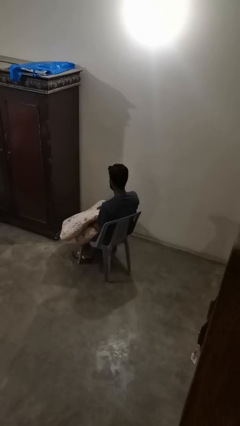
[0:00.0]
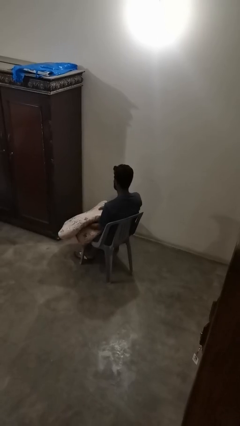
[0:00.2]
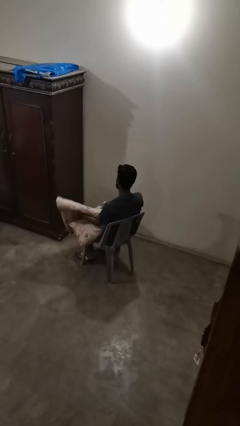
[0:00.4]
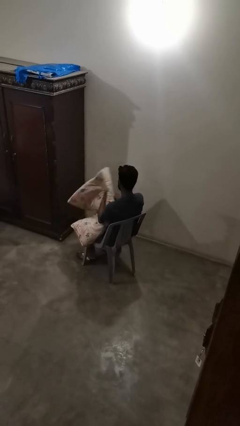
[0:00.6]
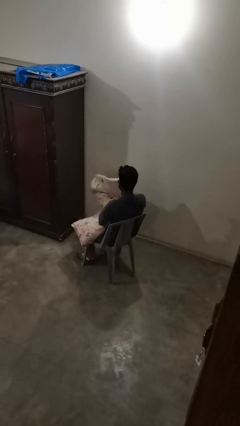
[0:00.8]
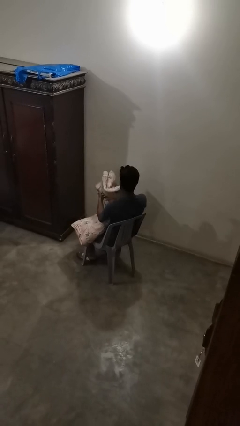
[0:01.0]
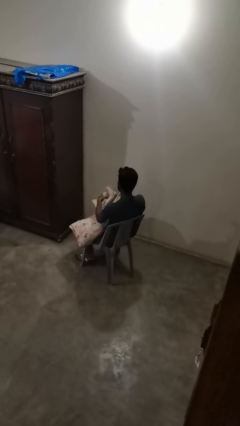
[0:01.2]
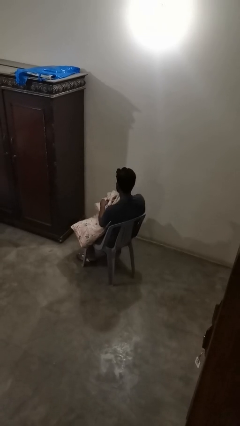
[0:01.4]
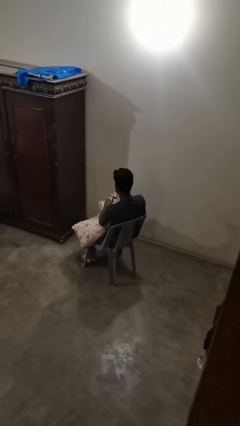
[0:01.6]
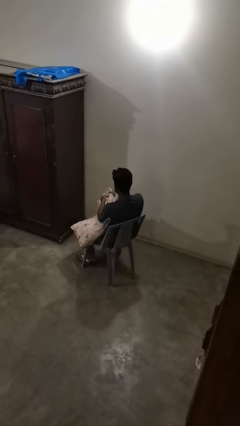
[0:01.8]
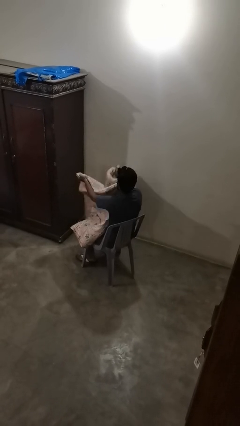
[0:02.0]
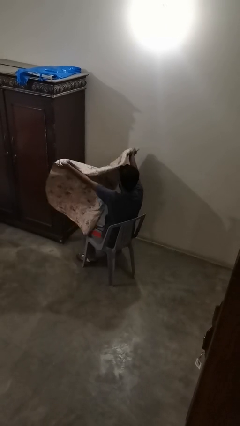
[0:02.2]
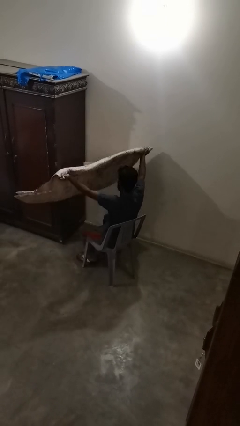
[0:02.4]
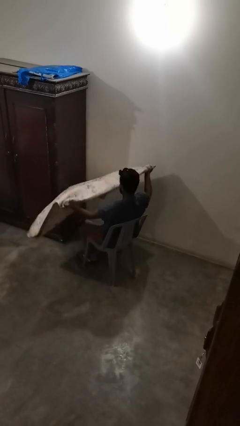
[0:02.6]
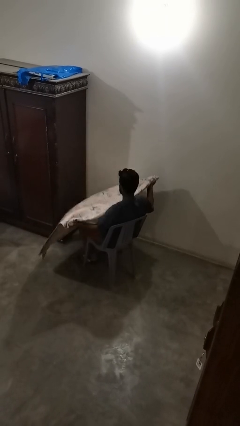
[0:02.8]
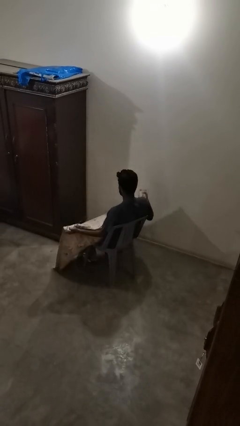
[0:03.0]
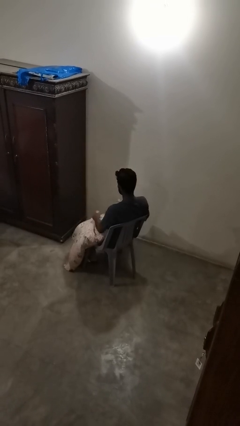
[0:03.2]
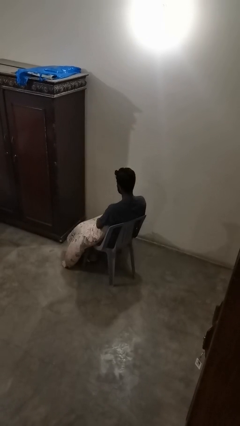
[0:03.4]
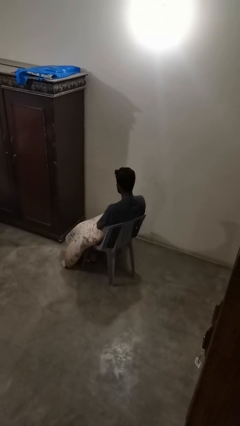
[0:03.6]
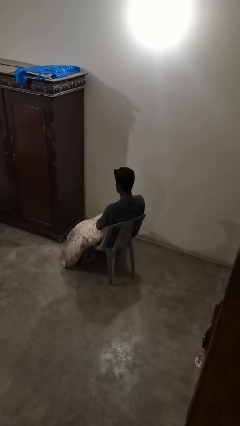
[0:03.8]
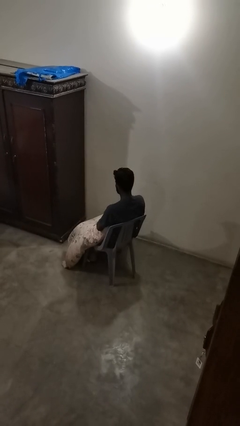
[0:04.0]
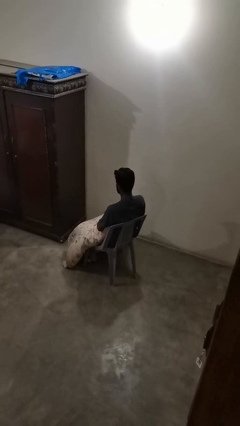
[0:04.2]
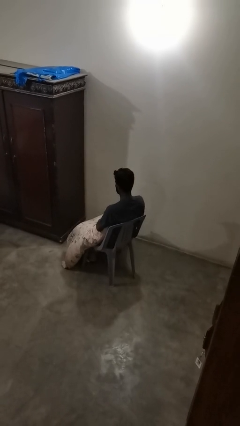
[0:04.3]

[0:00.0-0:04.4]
person unfolds blanket

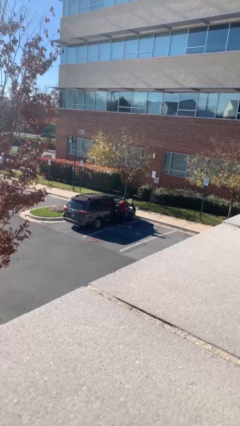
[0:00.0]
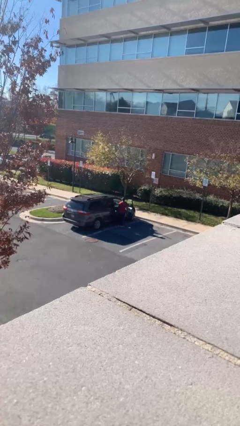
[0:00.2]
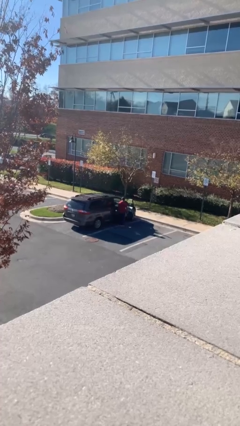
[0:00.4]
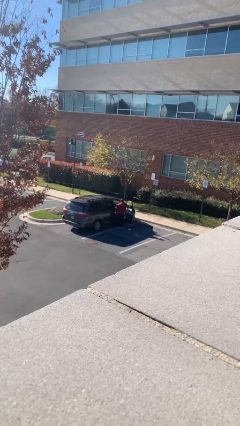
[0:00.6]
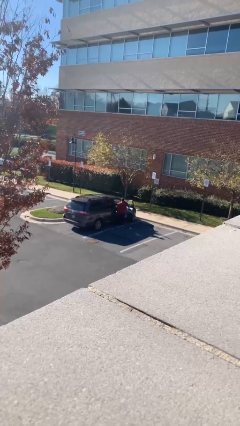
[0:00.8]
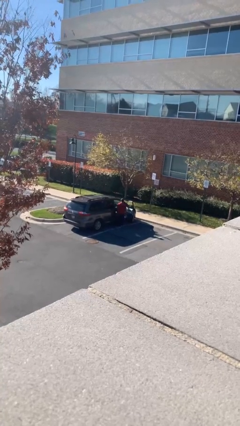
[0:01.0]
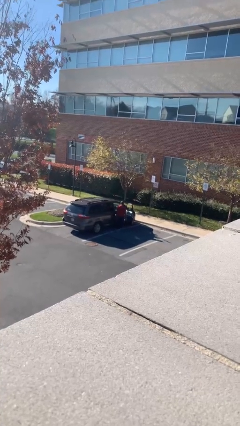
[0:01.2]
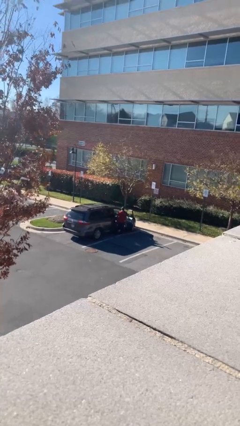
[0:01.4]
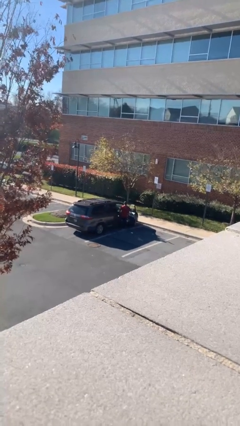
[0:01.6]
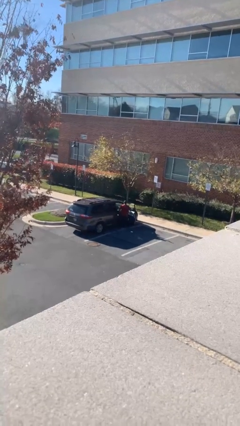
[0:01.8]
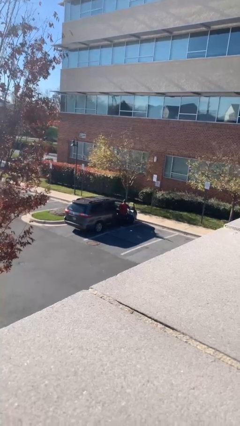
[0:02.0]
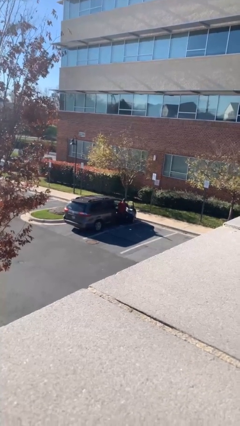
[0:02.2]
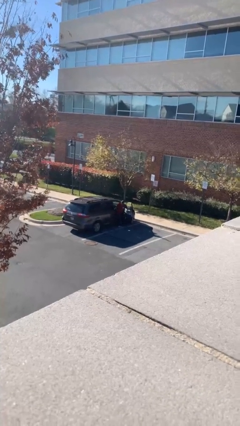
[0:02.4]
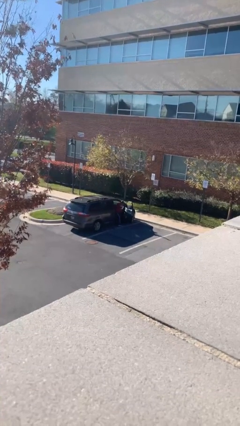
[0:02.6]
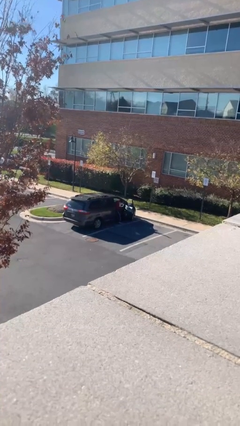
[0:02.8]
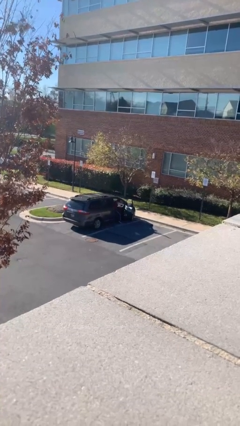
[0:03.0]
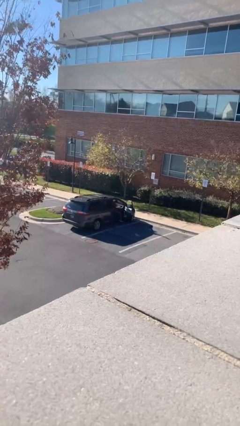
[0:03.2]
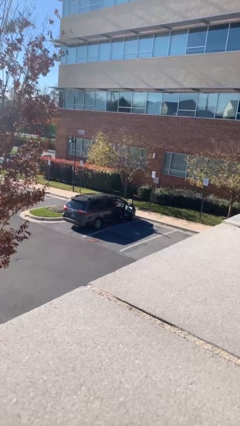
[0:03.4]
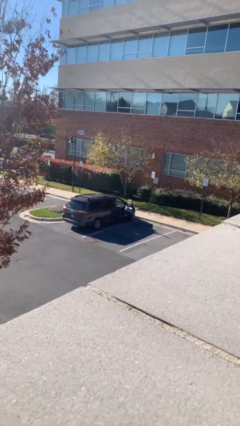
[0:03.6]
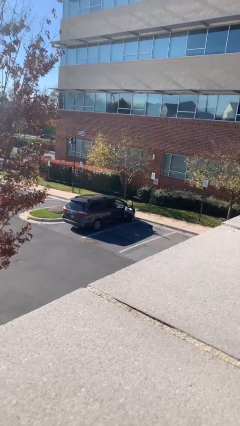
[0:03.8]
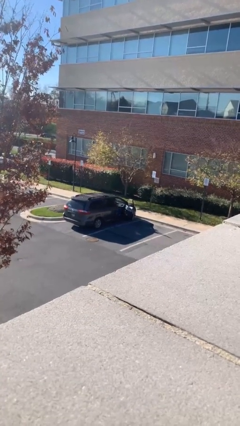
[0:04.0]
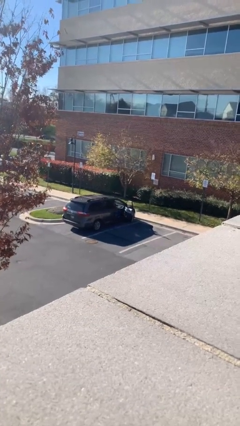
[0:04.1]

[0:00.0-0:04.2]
person enters car

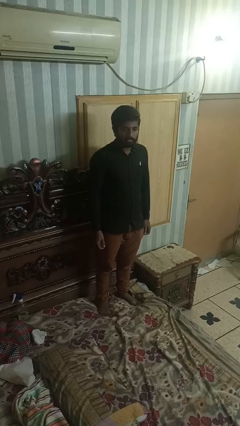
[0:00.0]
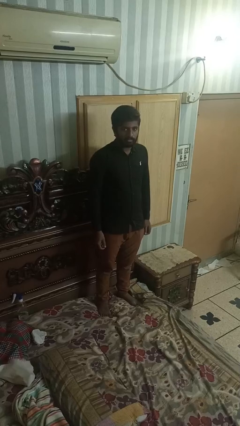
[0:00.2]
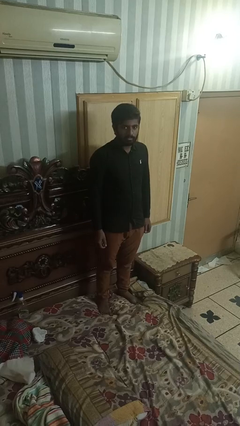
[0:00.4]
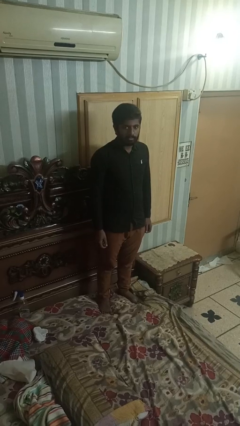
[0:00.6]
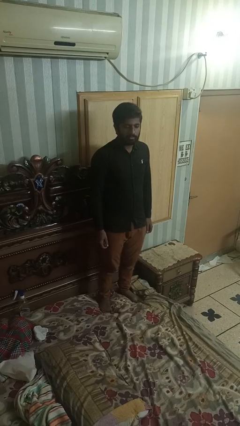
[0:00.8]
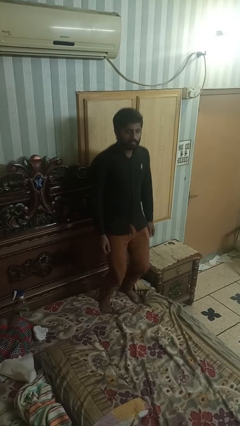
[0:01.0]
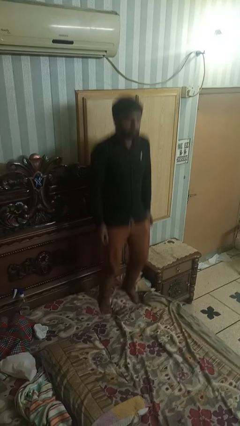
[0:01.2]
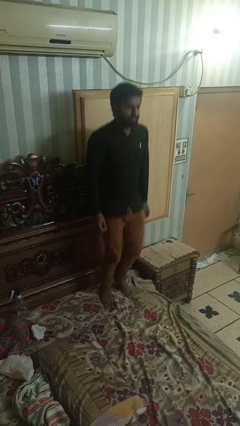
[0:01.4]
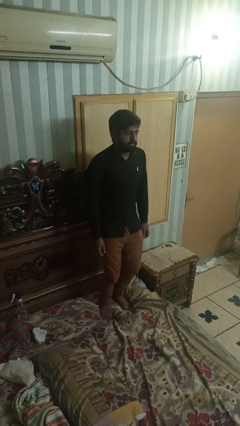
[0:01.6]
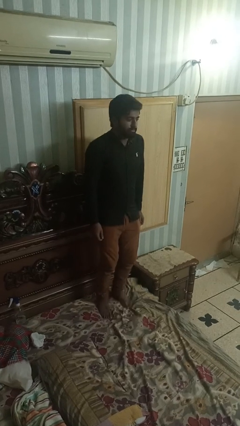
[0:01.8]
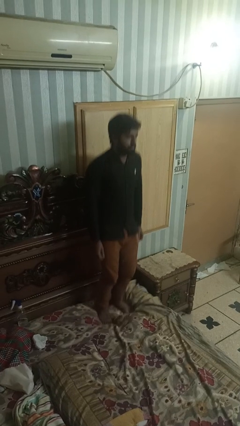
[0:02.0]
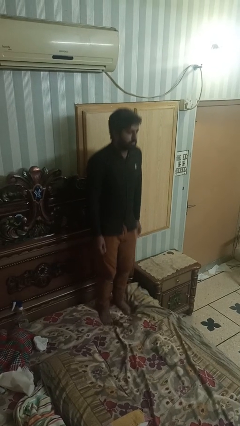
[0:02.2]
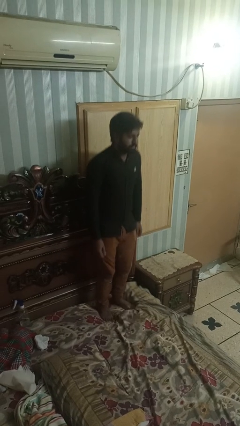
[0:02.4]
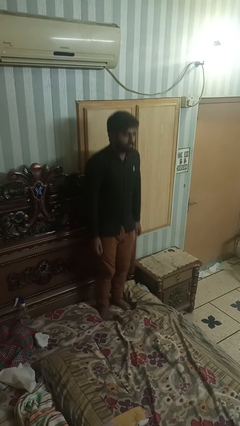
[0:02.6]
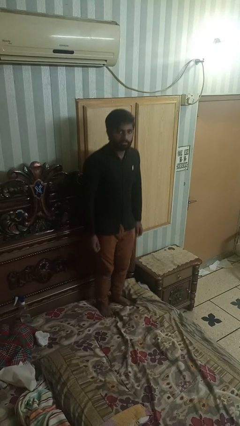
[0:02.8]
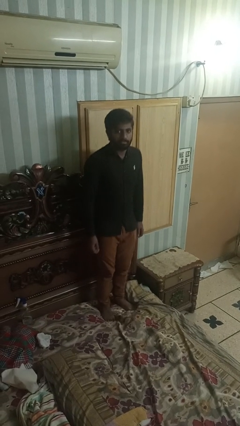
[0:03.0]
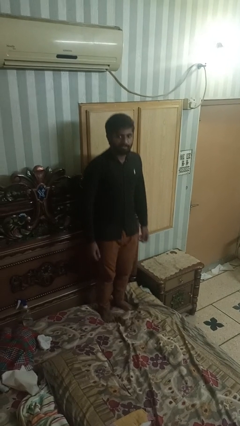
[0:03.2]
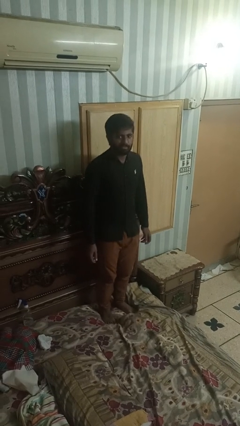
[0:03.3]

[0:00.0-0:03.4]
person jumps on bed

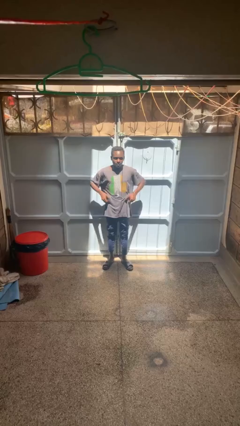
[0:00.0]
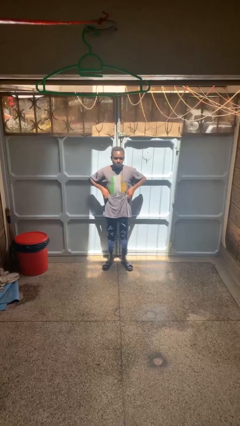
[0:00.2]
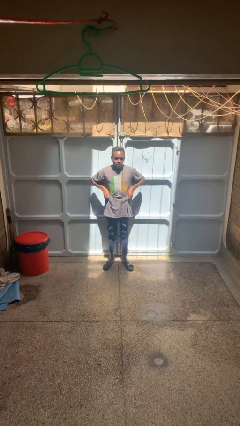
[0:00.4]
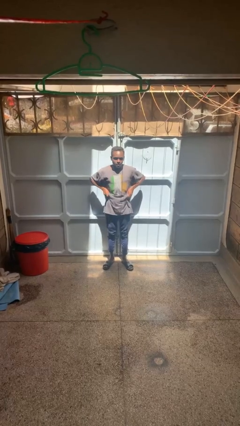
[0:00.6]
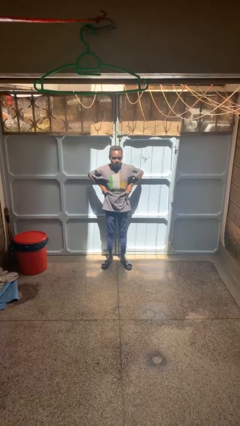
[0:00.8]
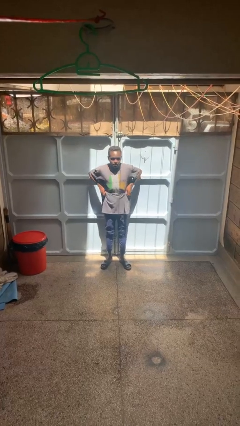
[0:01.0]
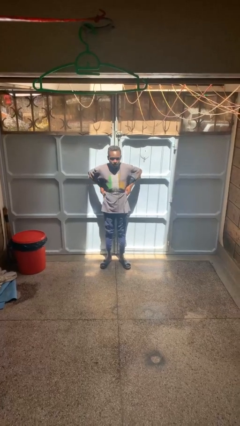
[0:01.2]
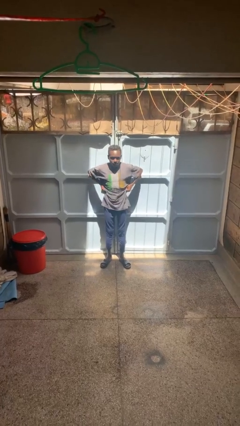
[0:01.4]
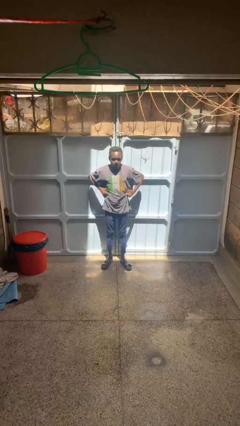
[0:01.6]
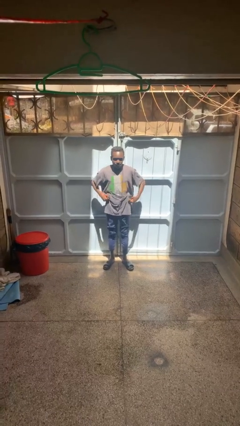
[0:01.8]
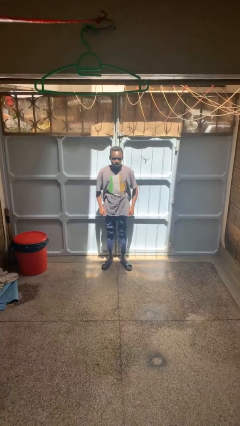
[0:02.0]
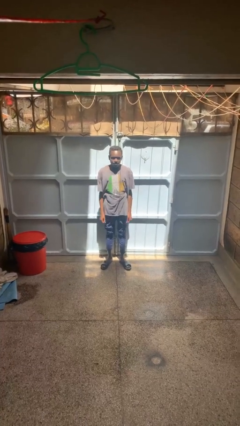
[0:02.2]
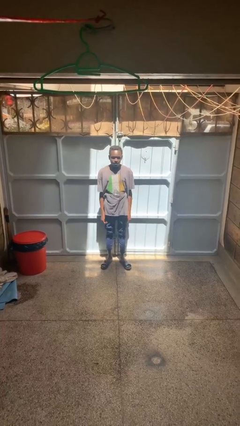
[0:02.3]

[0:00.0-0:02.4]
person hikes up pants

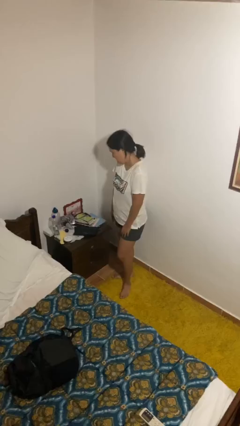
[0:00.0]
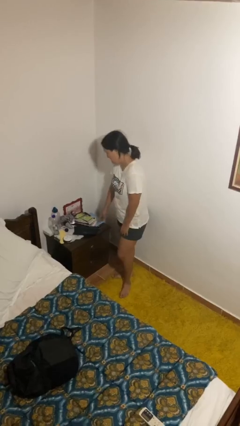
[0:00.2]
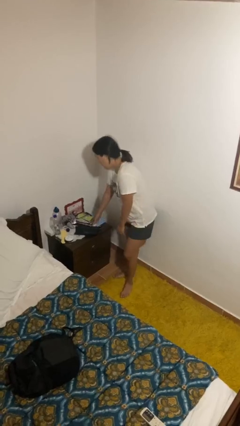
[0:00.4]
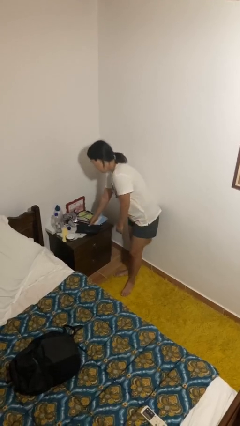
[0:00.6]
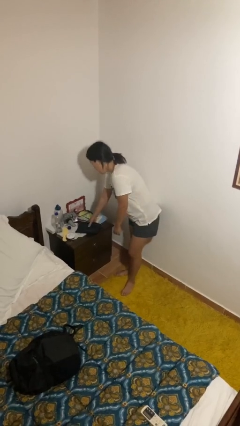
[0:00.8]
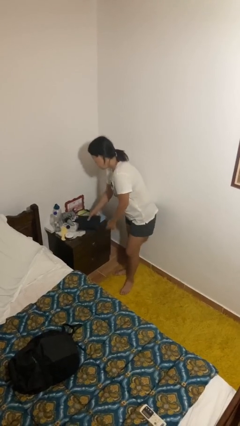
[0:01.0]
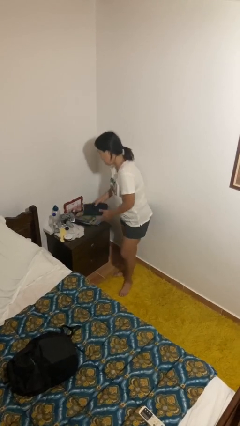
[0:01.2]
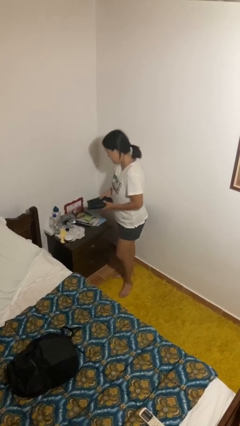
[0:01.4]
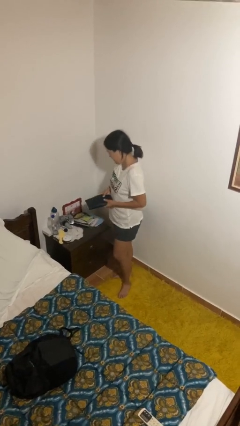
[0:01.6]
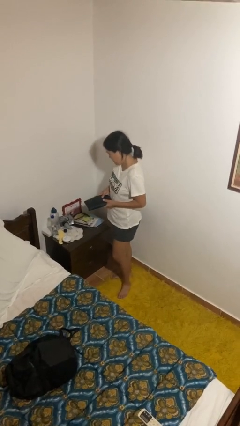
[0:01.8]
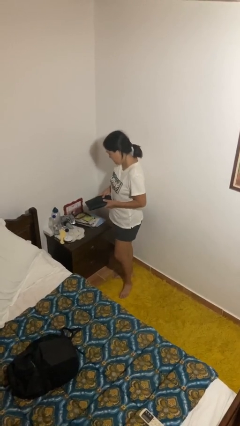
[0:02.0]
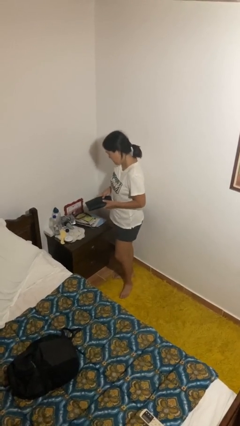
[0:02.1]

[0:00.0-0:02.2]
person picks up object from countertop

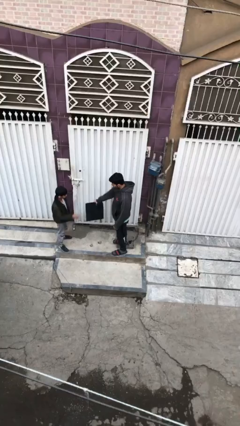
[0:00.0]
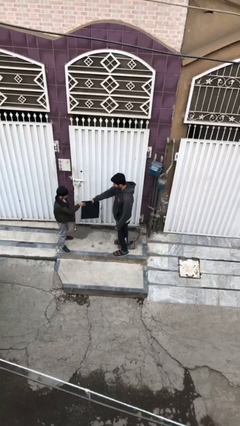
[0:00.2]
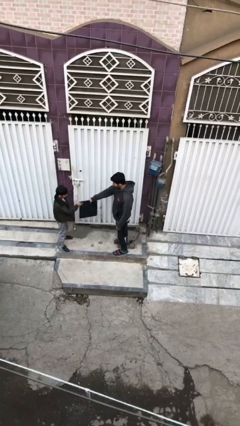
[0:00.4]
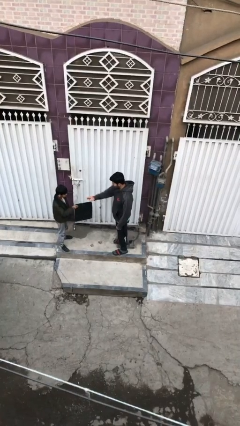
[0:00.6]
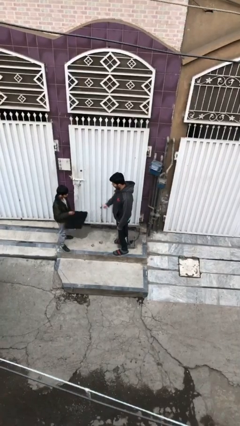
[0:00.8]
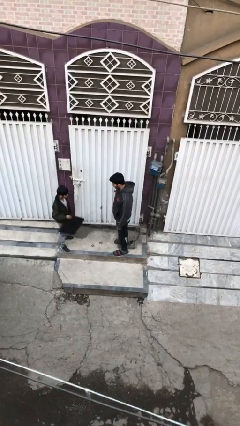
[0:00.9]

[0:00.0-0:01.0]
person transfers object to person
